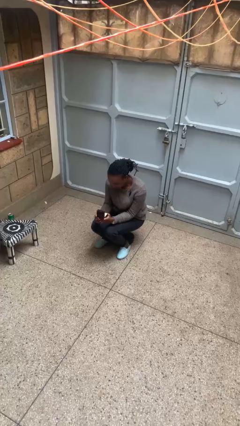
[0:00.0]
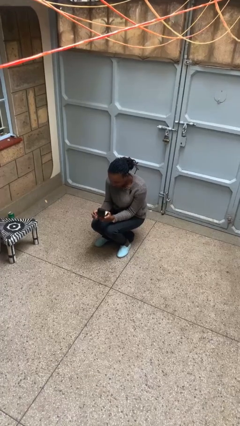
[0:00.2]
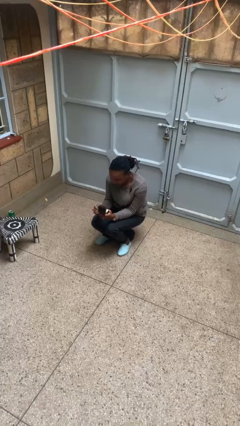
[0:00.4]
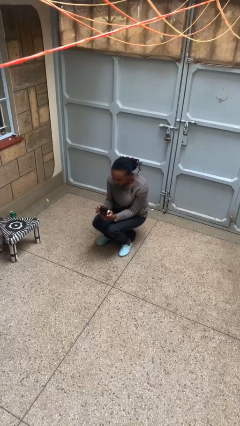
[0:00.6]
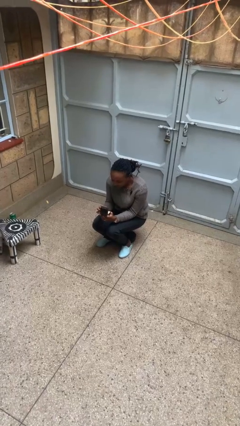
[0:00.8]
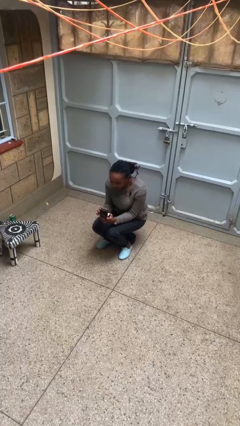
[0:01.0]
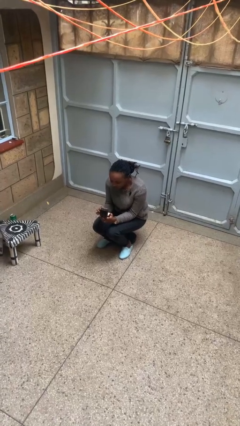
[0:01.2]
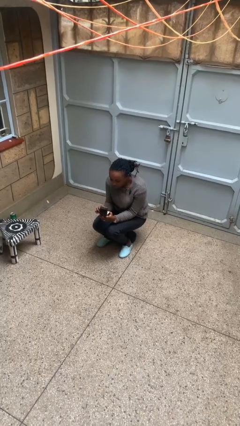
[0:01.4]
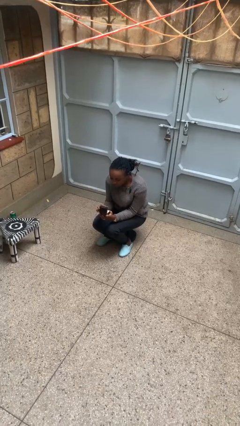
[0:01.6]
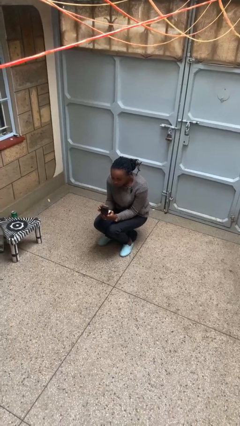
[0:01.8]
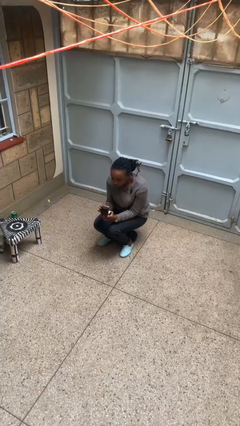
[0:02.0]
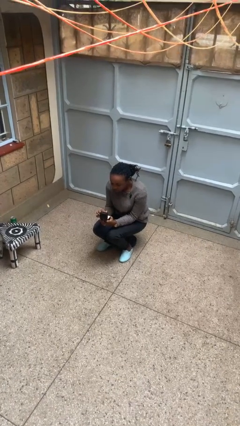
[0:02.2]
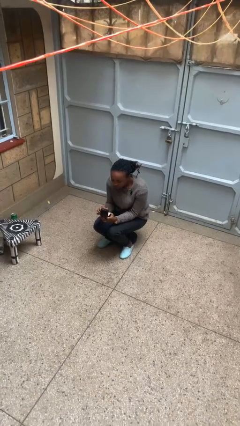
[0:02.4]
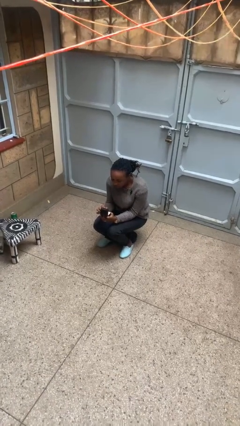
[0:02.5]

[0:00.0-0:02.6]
person searches jewelry box

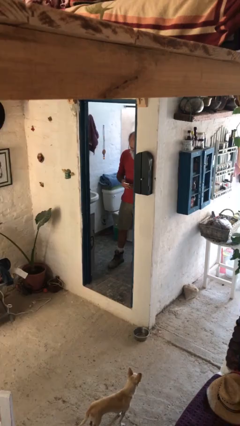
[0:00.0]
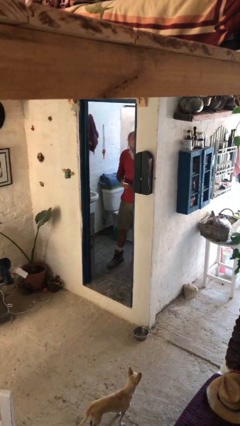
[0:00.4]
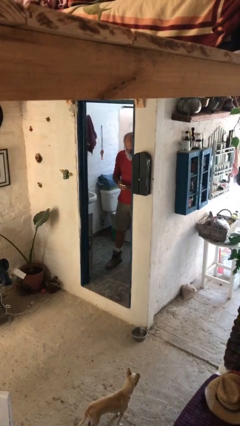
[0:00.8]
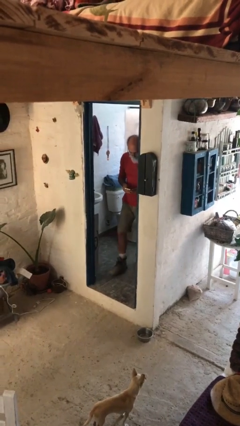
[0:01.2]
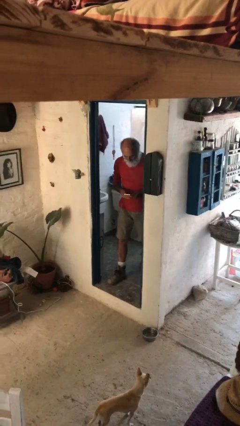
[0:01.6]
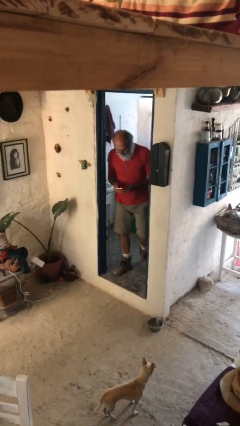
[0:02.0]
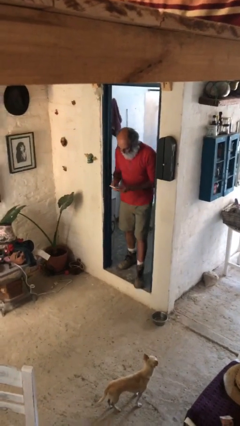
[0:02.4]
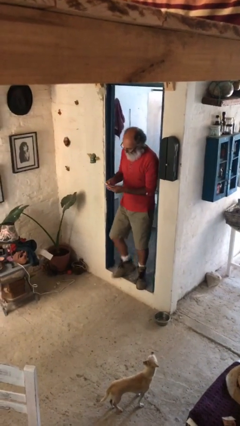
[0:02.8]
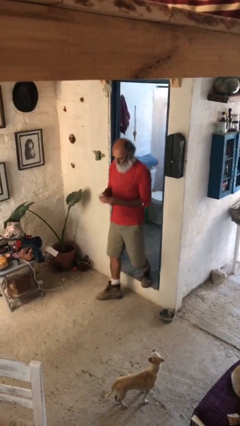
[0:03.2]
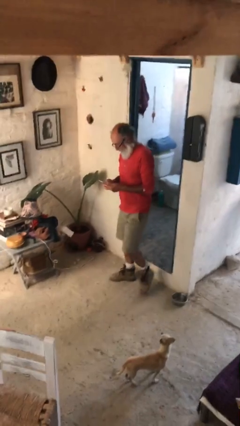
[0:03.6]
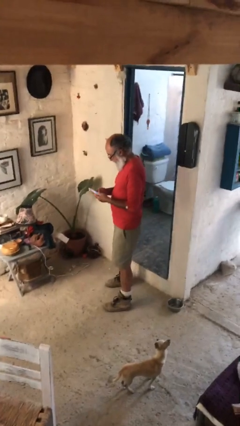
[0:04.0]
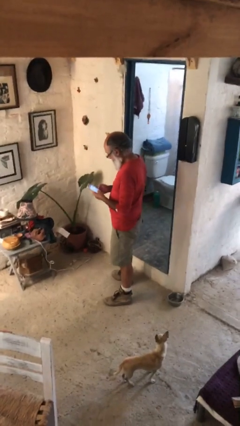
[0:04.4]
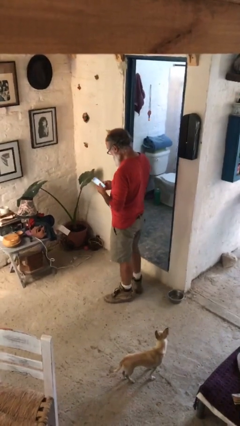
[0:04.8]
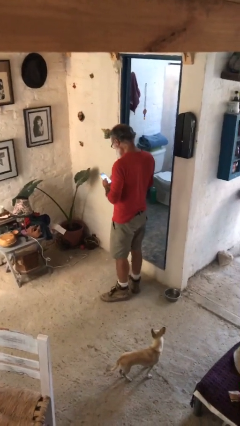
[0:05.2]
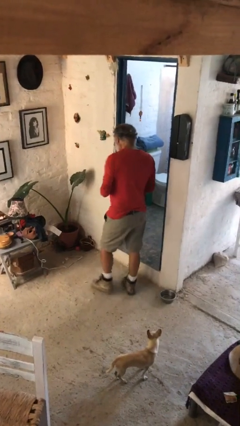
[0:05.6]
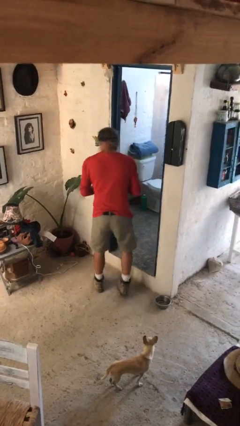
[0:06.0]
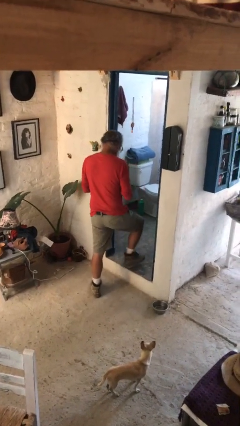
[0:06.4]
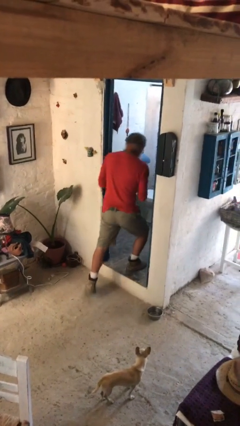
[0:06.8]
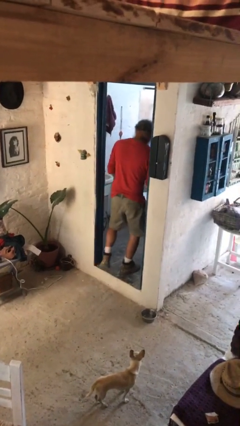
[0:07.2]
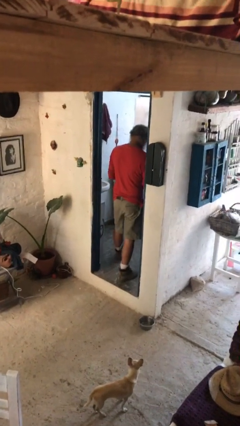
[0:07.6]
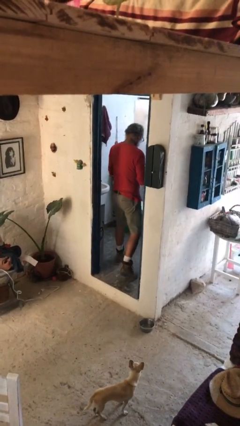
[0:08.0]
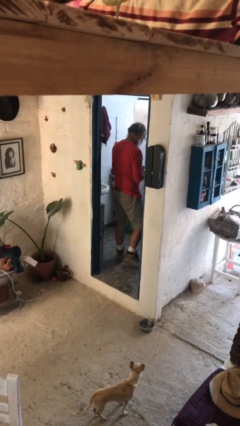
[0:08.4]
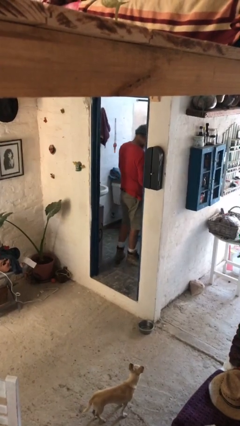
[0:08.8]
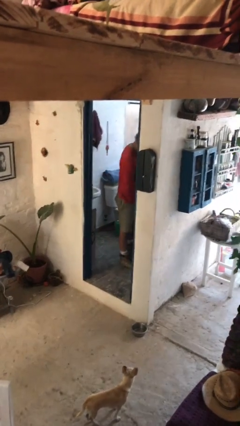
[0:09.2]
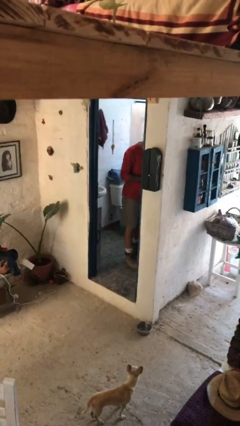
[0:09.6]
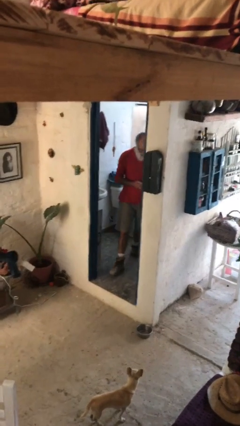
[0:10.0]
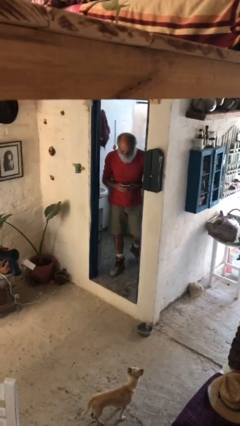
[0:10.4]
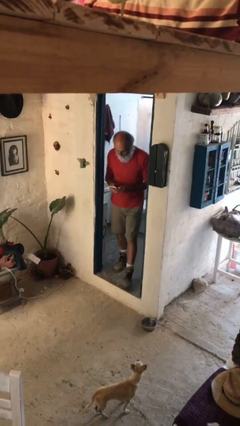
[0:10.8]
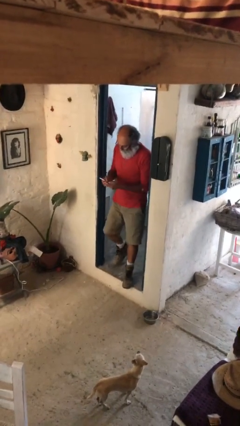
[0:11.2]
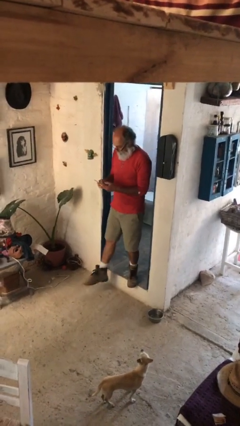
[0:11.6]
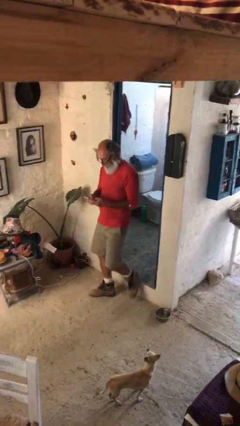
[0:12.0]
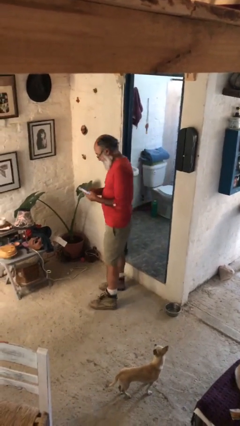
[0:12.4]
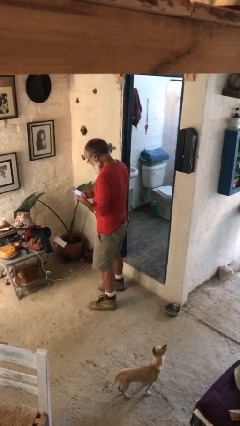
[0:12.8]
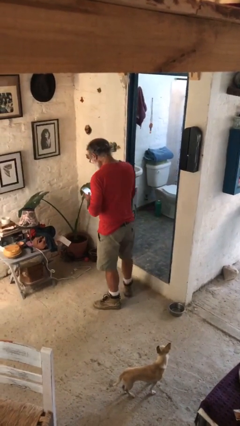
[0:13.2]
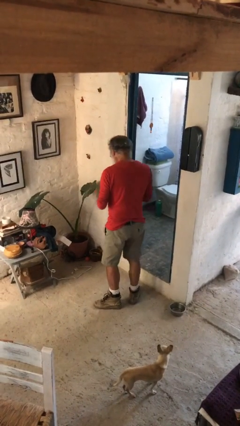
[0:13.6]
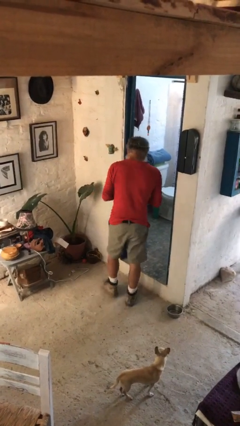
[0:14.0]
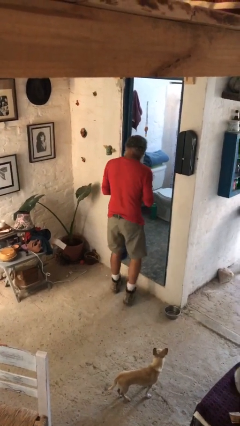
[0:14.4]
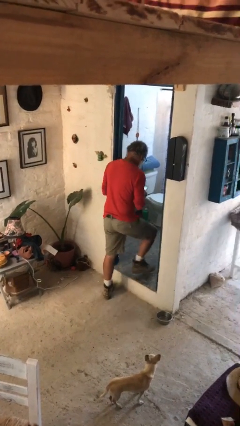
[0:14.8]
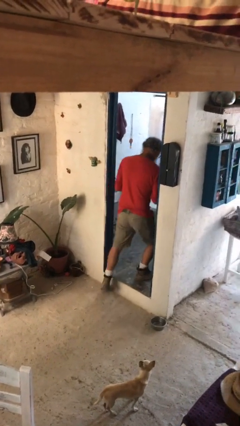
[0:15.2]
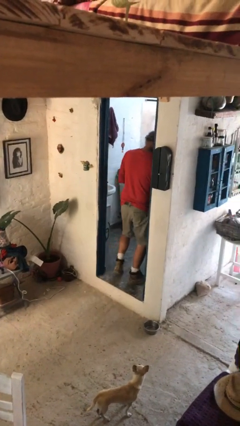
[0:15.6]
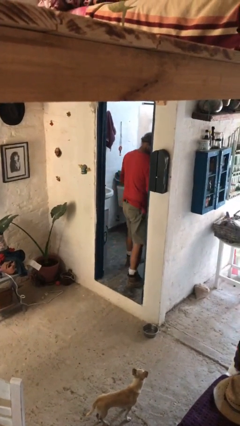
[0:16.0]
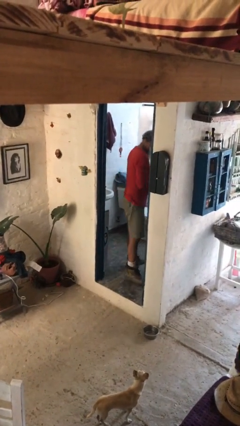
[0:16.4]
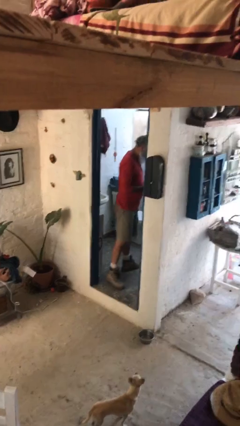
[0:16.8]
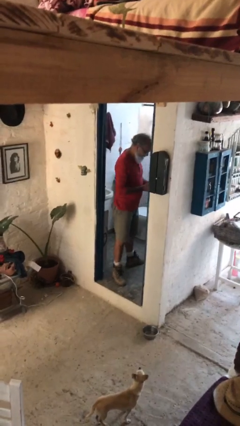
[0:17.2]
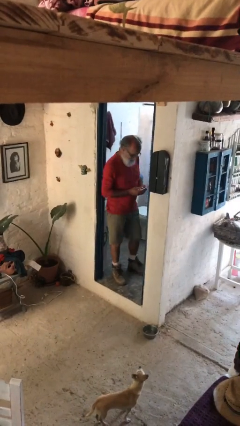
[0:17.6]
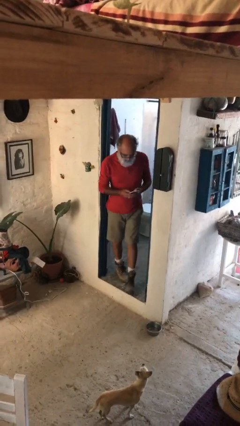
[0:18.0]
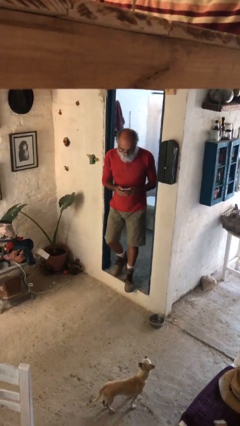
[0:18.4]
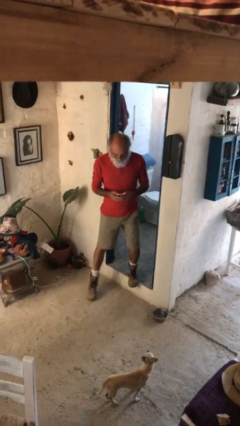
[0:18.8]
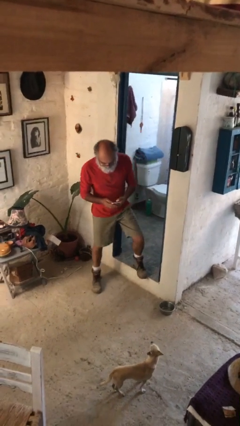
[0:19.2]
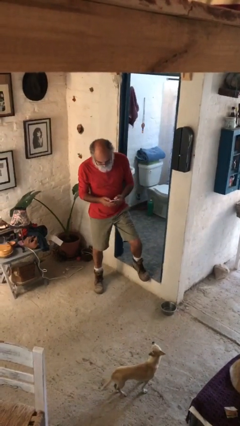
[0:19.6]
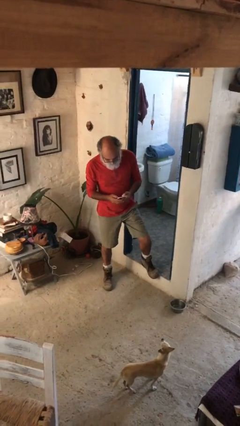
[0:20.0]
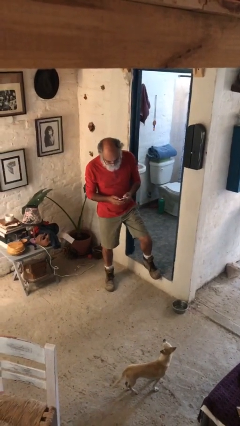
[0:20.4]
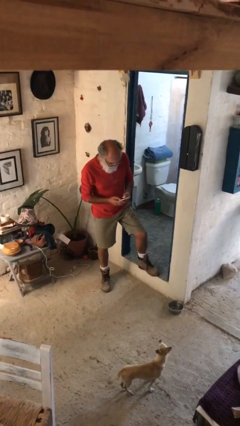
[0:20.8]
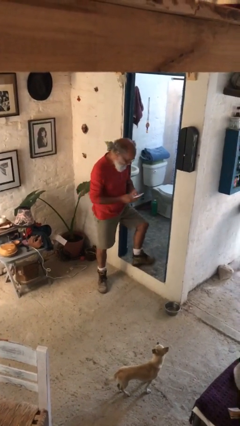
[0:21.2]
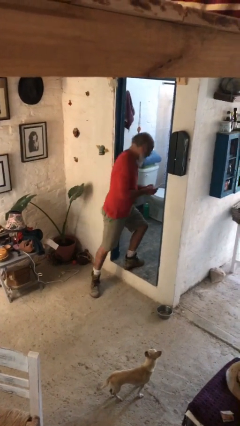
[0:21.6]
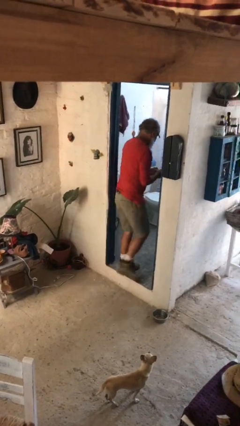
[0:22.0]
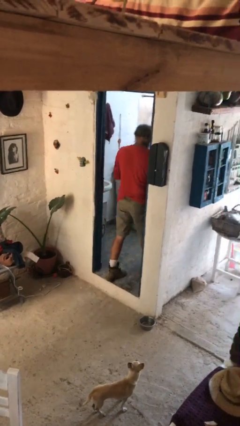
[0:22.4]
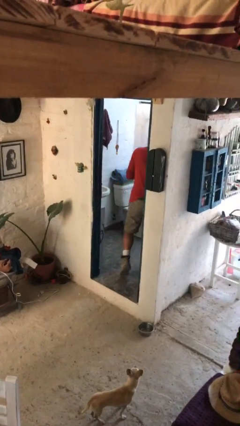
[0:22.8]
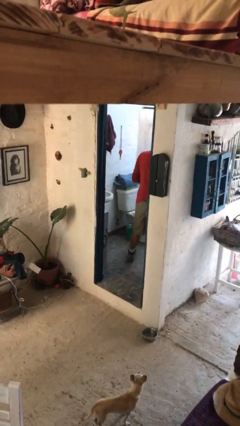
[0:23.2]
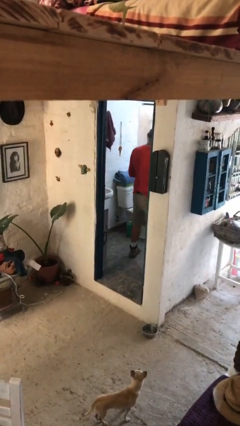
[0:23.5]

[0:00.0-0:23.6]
person texts on phone

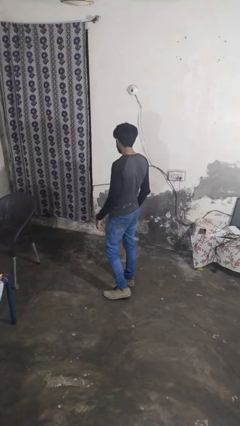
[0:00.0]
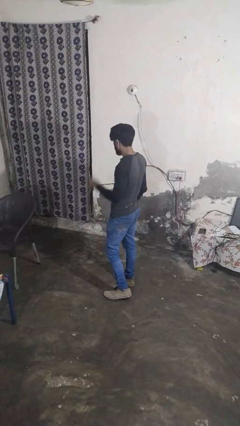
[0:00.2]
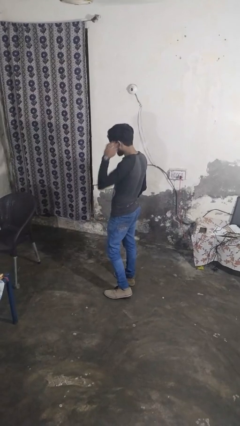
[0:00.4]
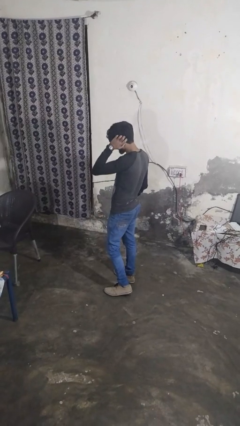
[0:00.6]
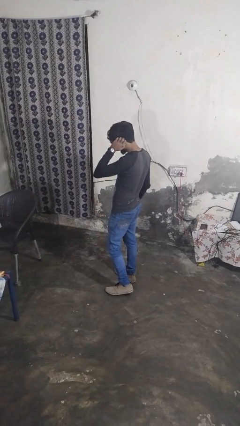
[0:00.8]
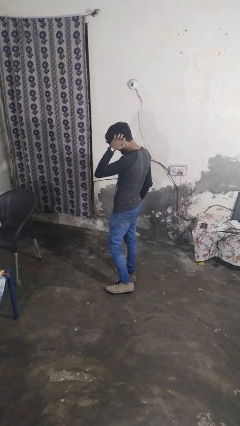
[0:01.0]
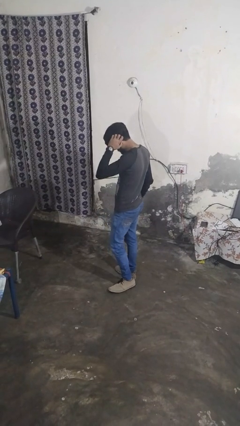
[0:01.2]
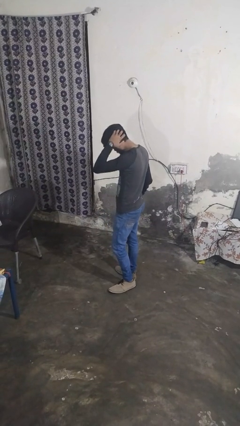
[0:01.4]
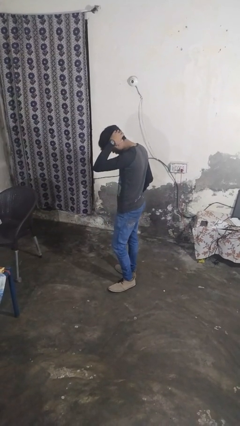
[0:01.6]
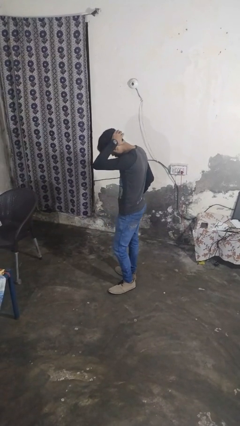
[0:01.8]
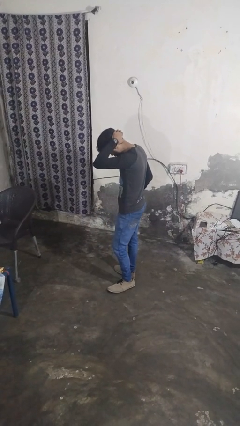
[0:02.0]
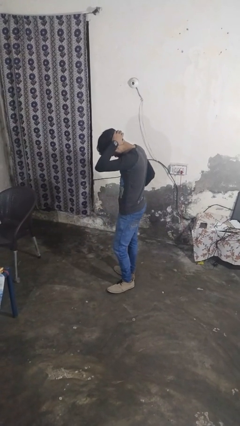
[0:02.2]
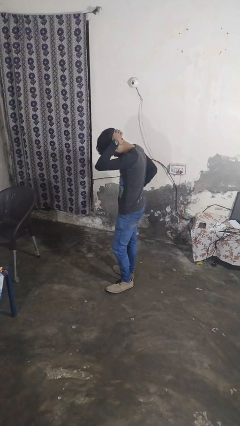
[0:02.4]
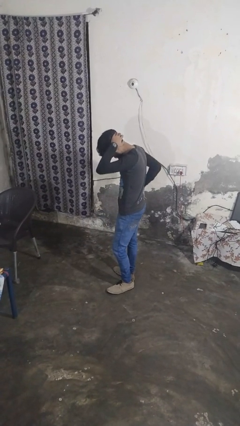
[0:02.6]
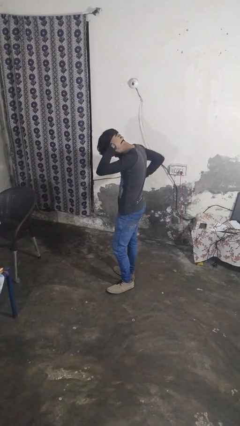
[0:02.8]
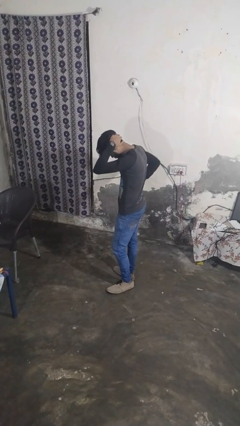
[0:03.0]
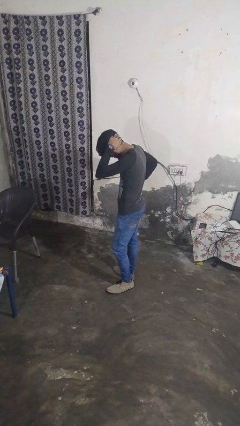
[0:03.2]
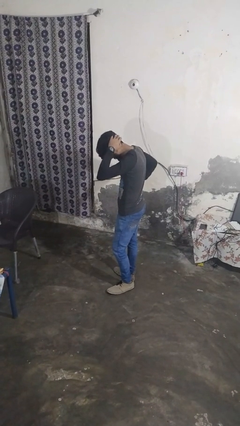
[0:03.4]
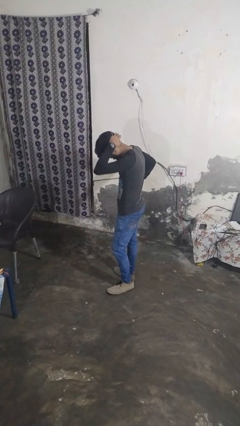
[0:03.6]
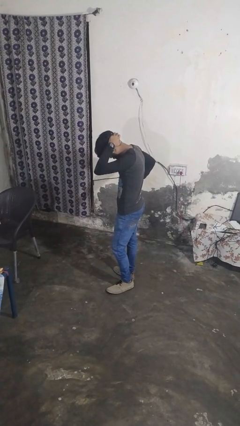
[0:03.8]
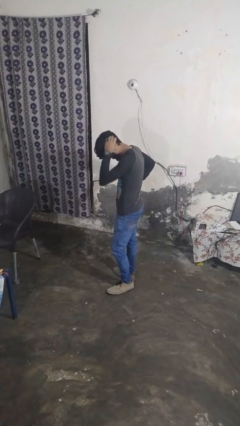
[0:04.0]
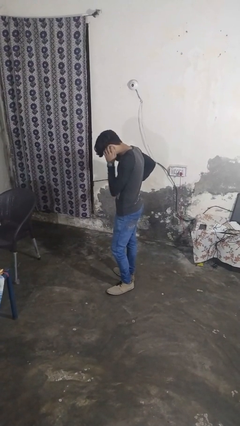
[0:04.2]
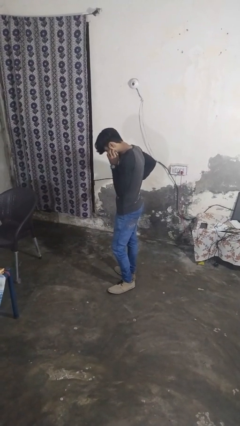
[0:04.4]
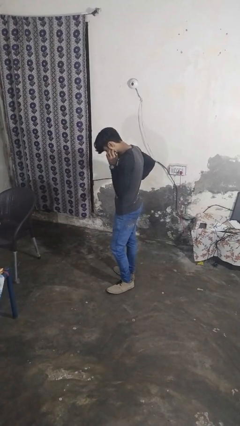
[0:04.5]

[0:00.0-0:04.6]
person scratches face
